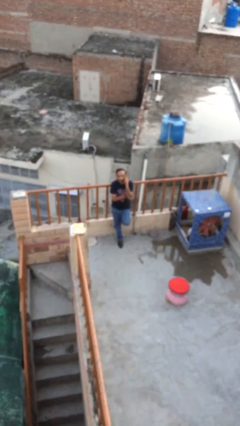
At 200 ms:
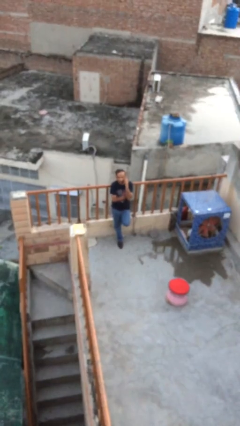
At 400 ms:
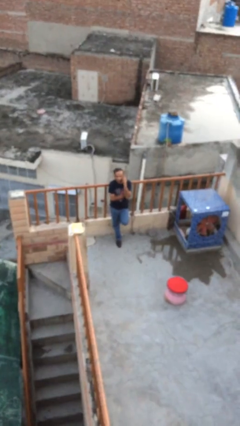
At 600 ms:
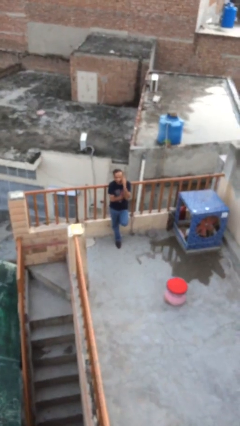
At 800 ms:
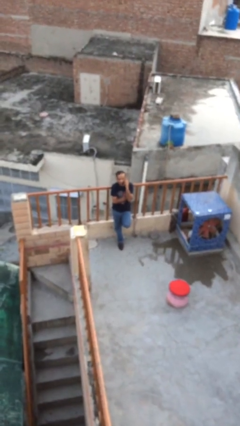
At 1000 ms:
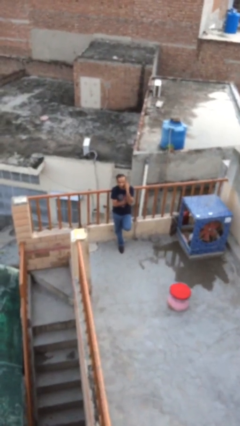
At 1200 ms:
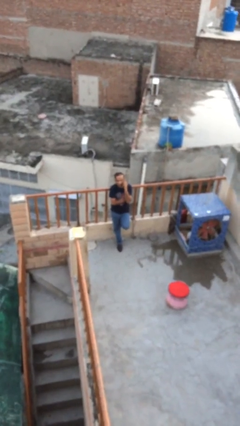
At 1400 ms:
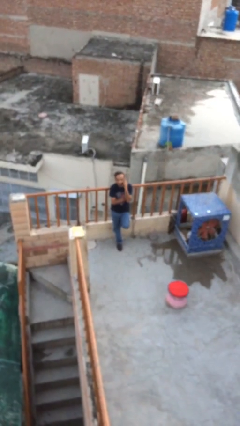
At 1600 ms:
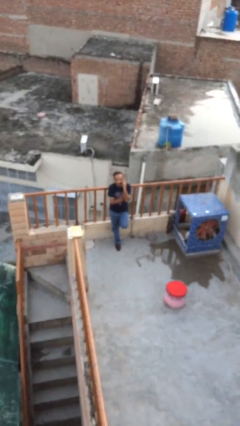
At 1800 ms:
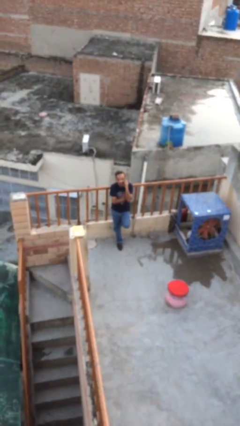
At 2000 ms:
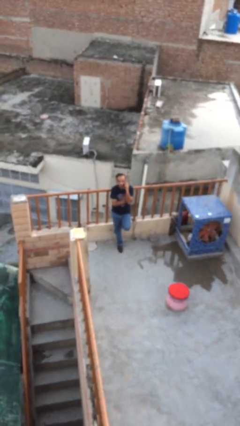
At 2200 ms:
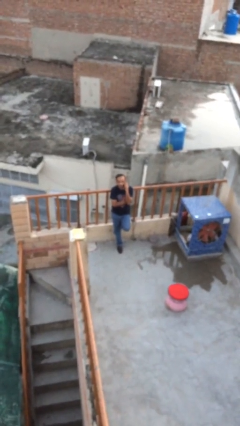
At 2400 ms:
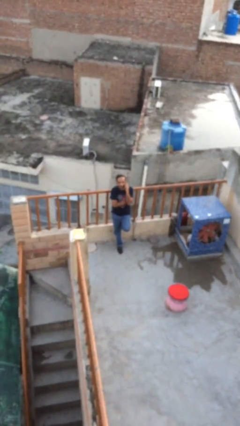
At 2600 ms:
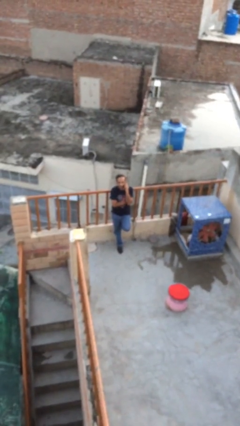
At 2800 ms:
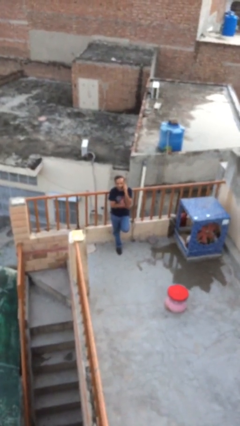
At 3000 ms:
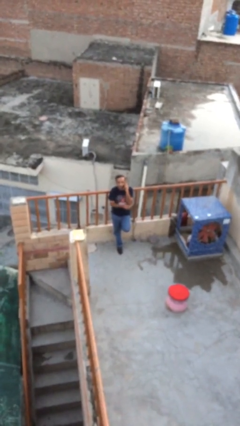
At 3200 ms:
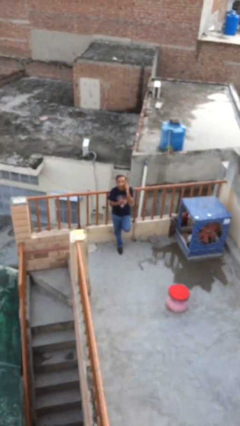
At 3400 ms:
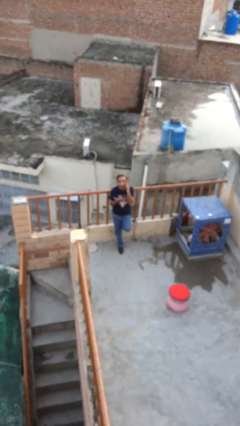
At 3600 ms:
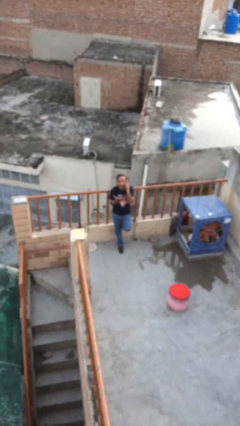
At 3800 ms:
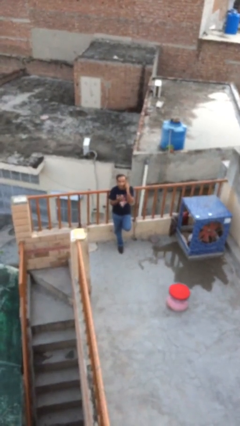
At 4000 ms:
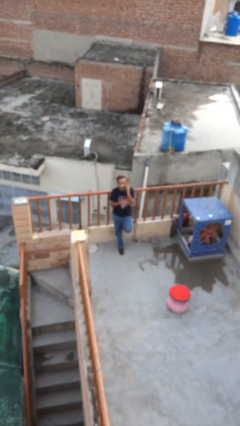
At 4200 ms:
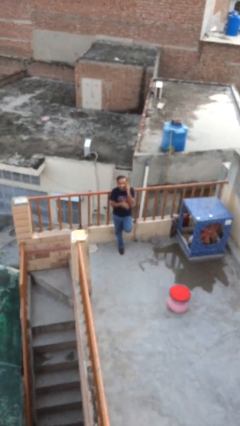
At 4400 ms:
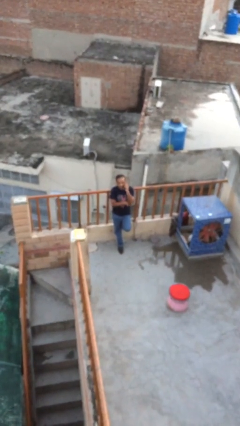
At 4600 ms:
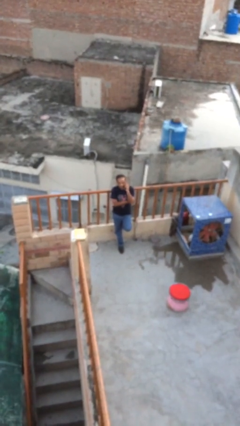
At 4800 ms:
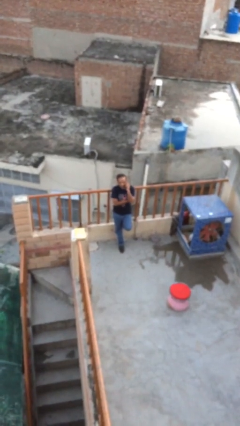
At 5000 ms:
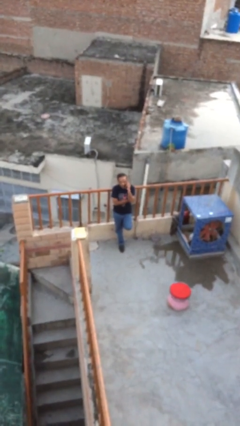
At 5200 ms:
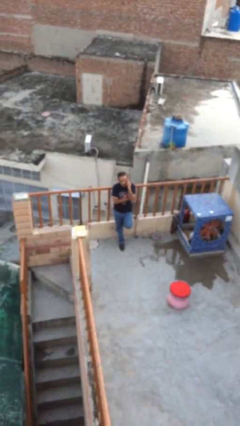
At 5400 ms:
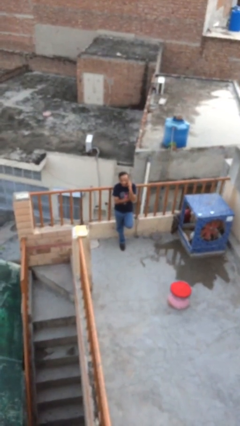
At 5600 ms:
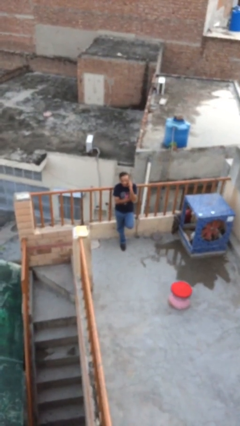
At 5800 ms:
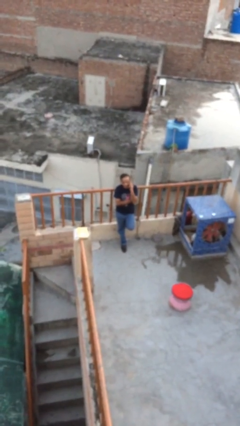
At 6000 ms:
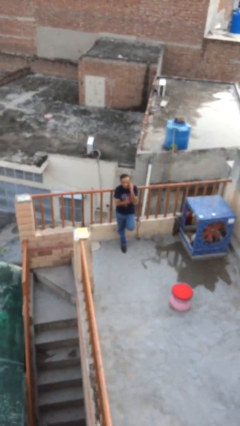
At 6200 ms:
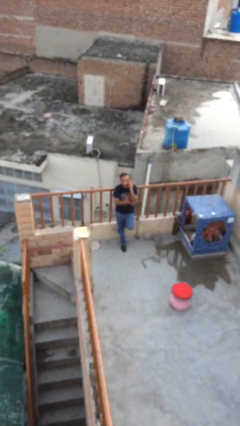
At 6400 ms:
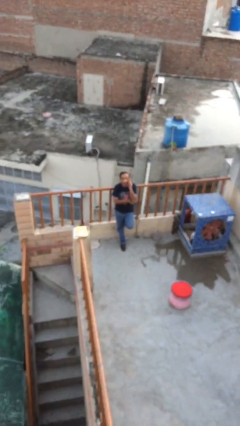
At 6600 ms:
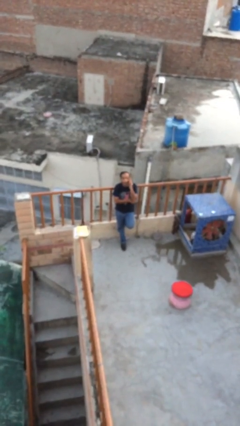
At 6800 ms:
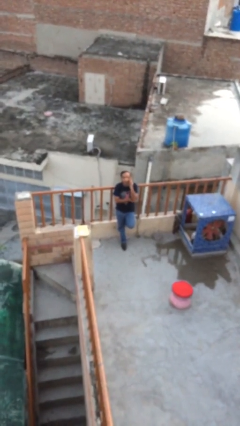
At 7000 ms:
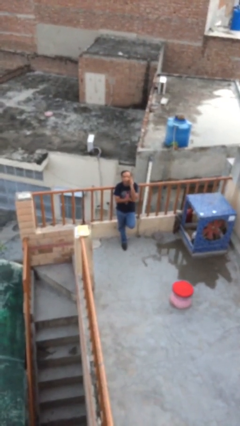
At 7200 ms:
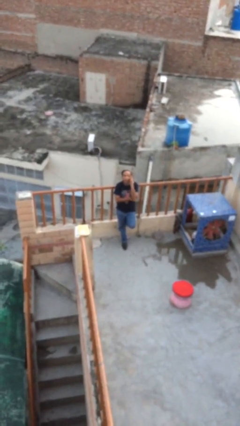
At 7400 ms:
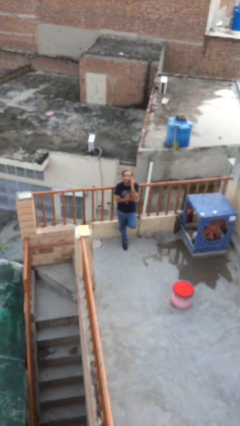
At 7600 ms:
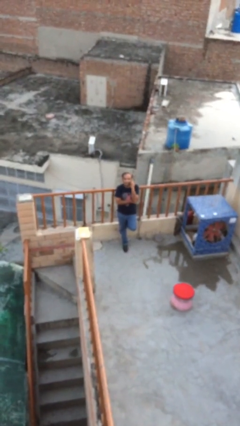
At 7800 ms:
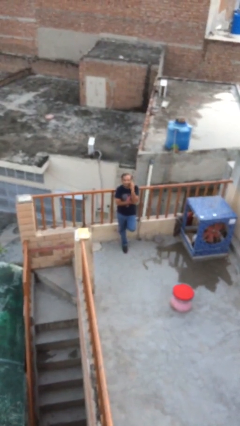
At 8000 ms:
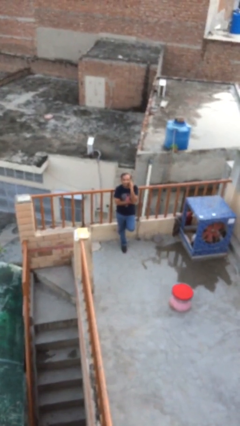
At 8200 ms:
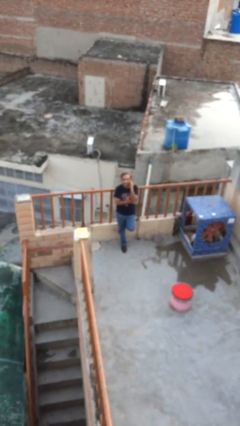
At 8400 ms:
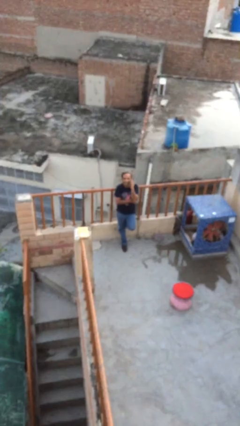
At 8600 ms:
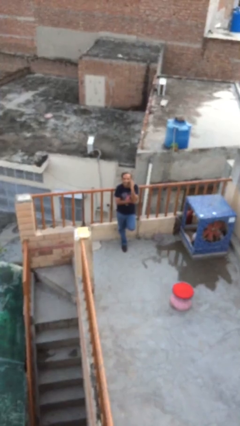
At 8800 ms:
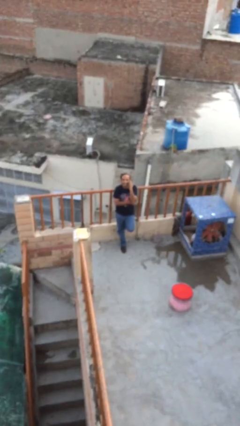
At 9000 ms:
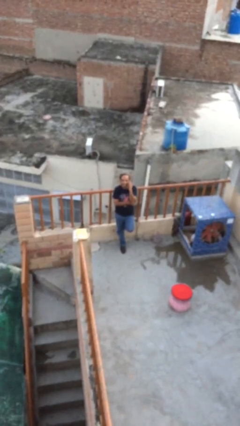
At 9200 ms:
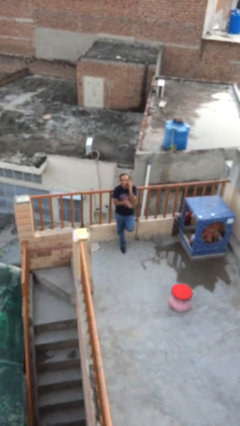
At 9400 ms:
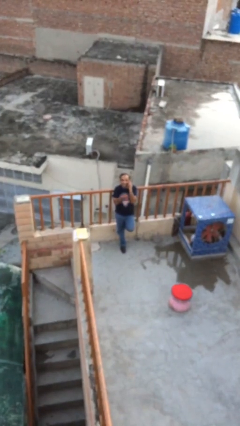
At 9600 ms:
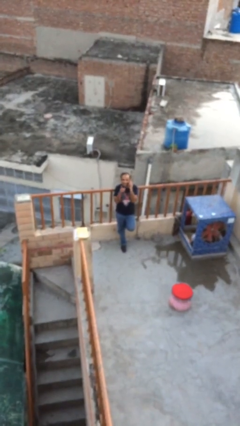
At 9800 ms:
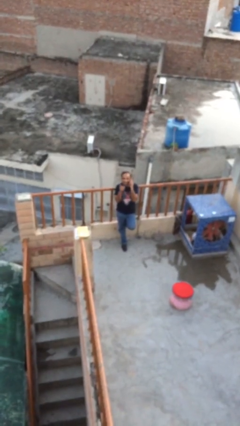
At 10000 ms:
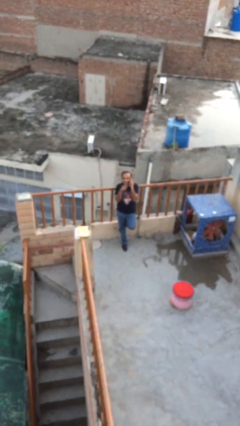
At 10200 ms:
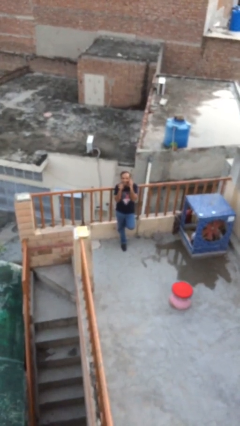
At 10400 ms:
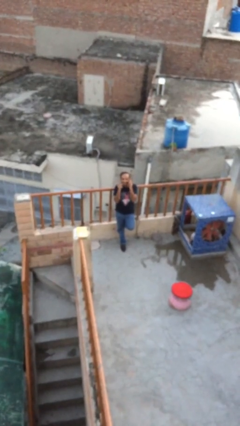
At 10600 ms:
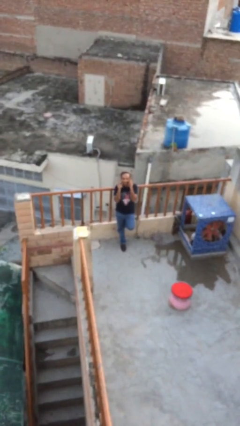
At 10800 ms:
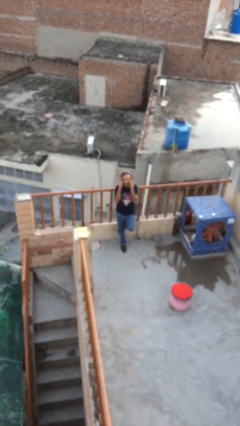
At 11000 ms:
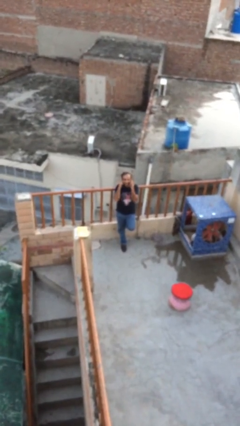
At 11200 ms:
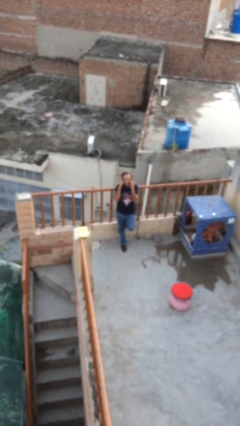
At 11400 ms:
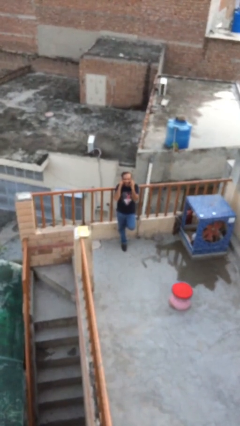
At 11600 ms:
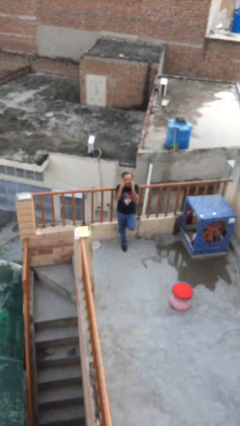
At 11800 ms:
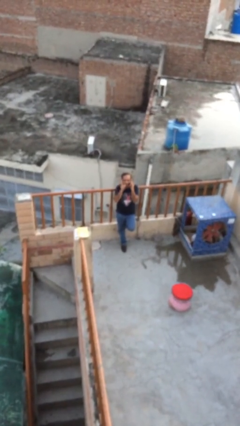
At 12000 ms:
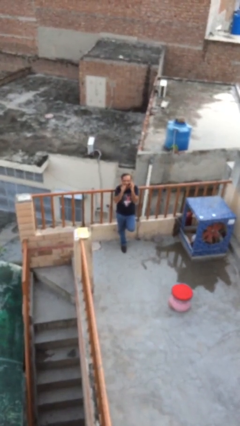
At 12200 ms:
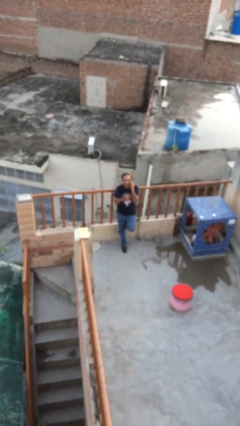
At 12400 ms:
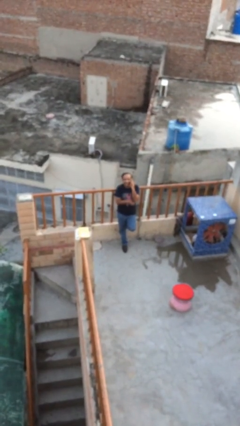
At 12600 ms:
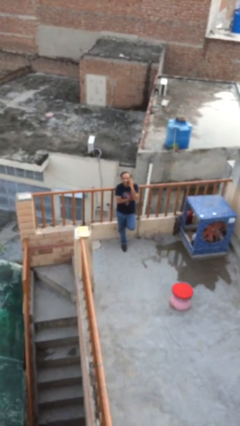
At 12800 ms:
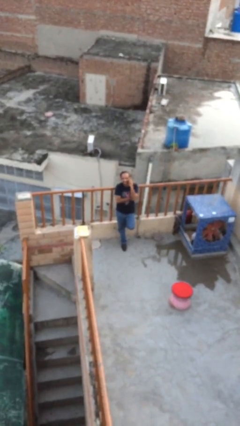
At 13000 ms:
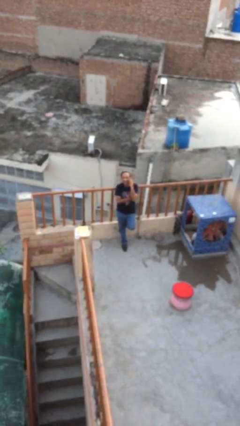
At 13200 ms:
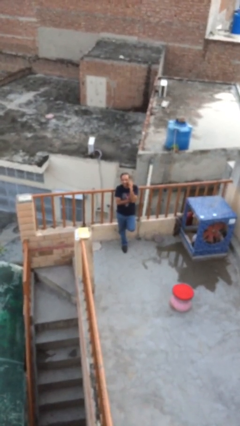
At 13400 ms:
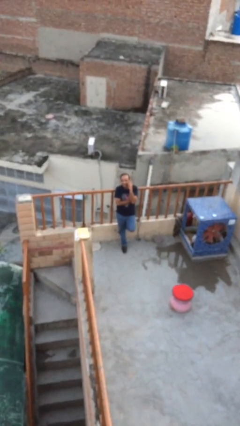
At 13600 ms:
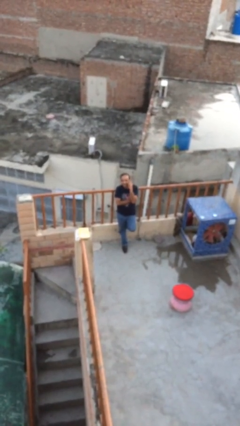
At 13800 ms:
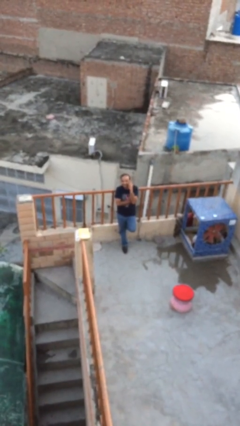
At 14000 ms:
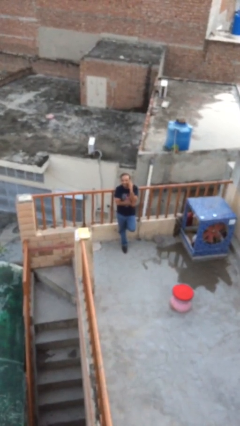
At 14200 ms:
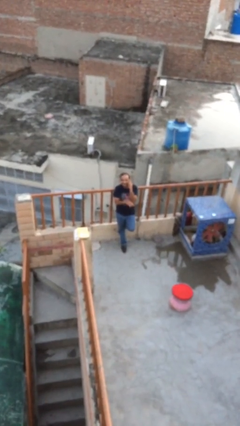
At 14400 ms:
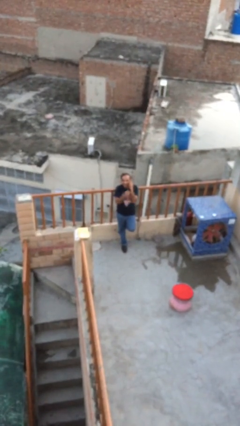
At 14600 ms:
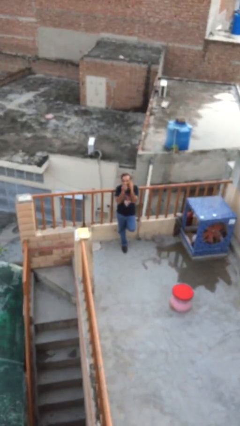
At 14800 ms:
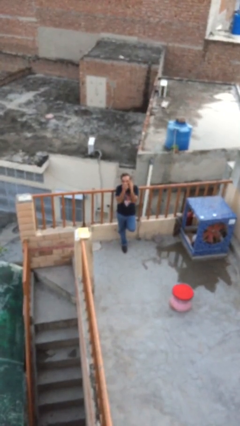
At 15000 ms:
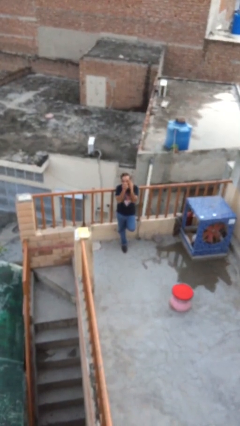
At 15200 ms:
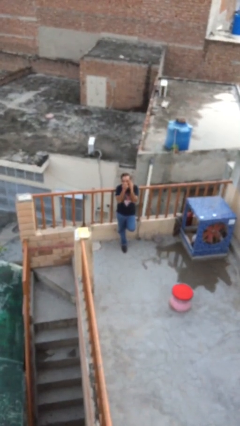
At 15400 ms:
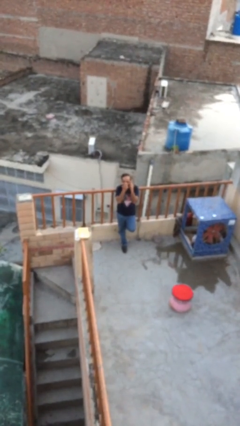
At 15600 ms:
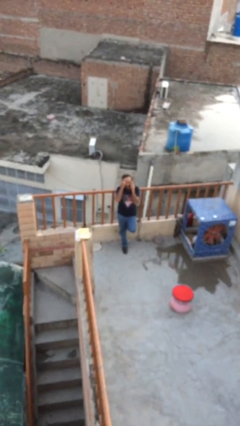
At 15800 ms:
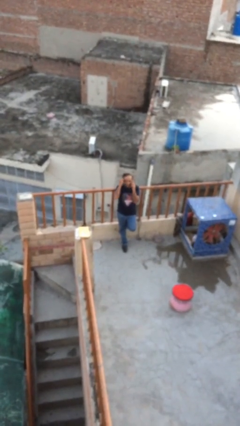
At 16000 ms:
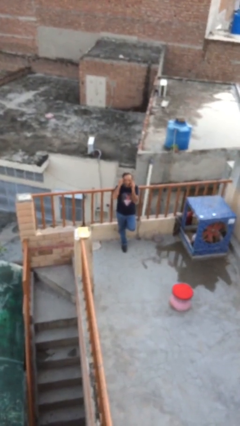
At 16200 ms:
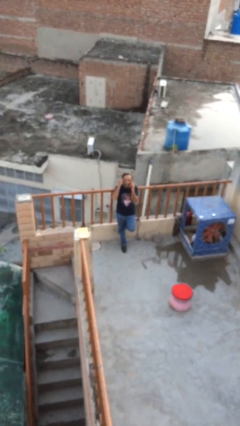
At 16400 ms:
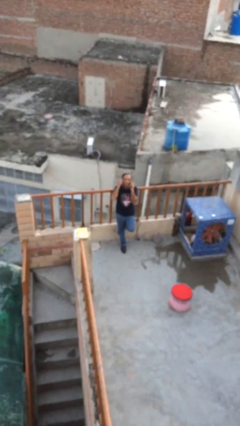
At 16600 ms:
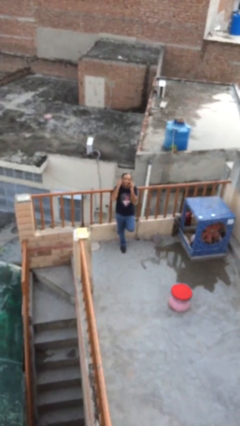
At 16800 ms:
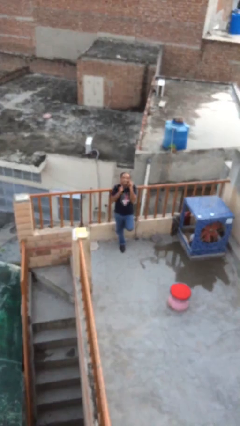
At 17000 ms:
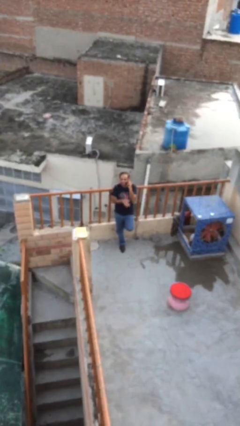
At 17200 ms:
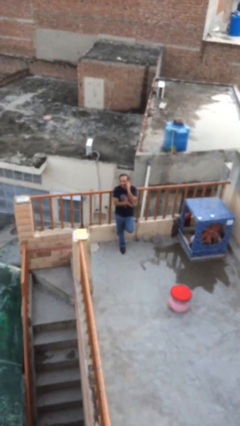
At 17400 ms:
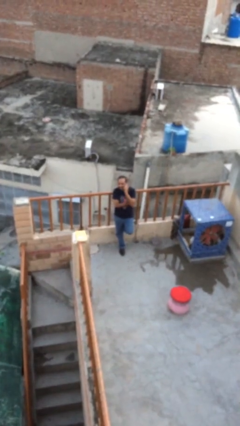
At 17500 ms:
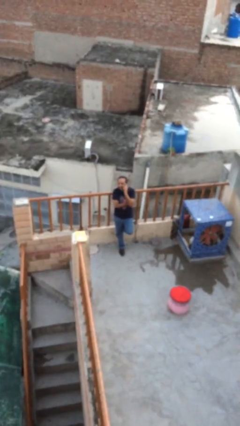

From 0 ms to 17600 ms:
person talks on phone

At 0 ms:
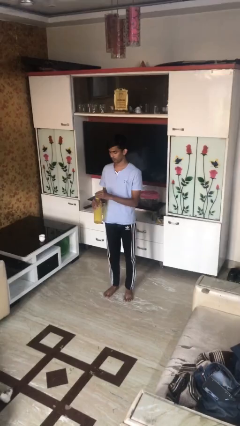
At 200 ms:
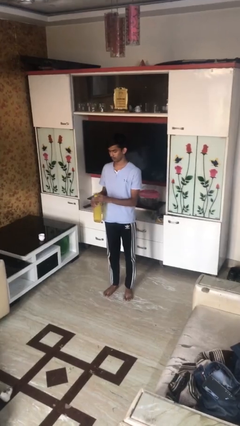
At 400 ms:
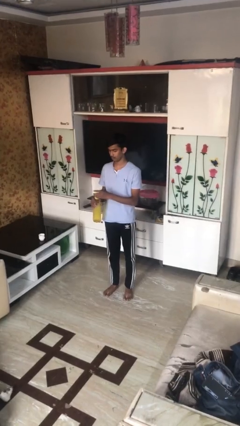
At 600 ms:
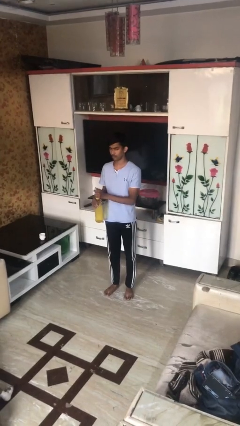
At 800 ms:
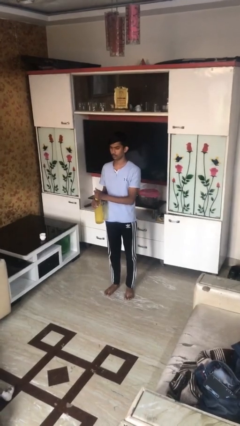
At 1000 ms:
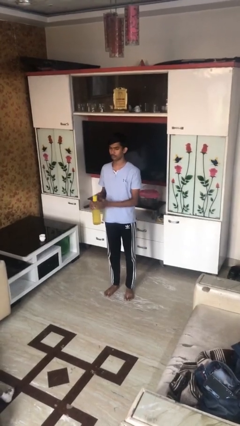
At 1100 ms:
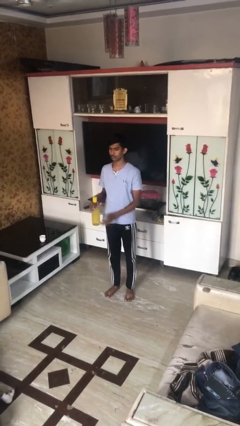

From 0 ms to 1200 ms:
person screws lid to bottle
